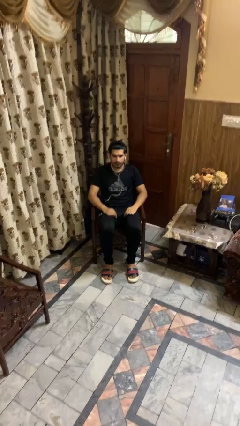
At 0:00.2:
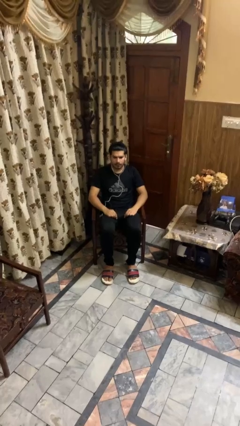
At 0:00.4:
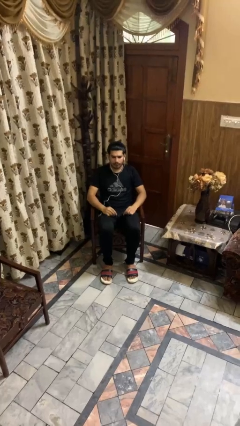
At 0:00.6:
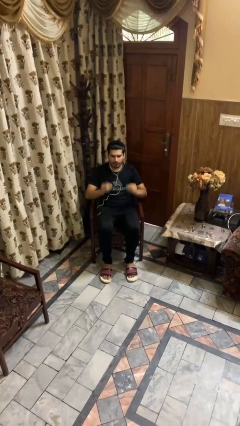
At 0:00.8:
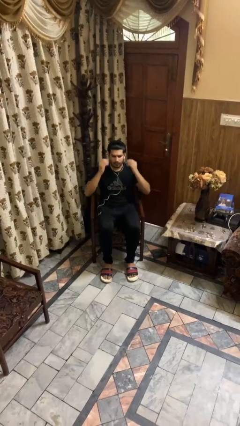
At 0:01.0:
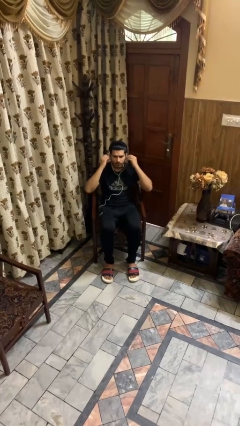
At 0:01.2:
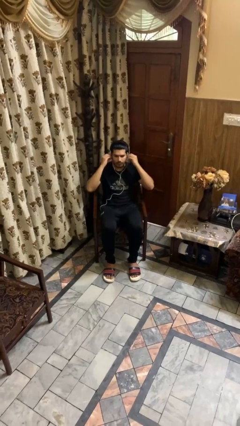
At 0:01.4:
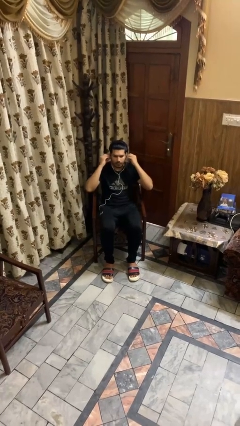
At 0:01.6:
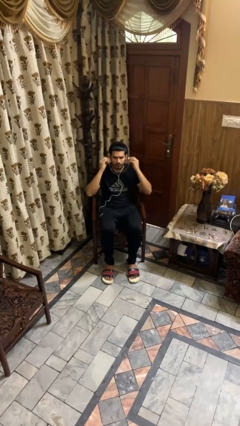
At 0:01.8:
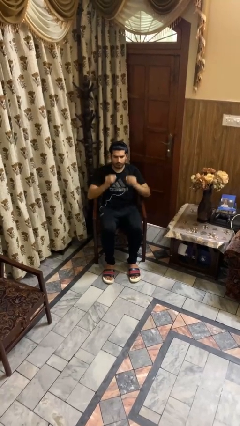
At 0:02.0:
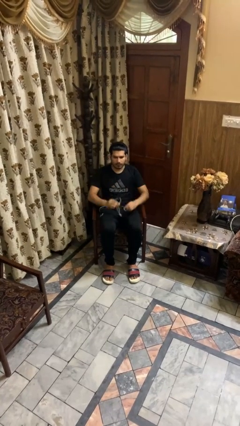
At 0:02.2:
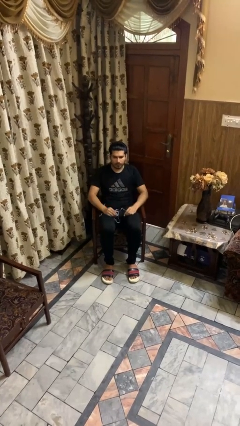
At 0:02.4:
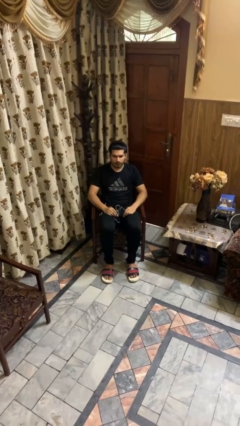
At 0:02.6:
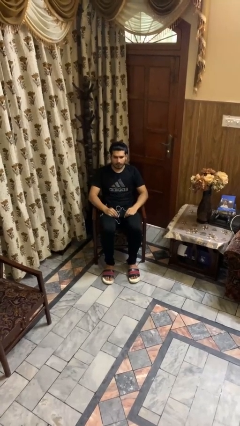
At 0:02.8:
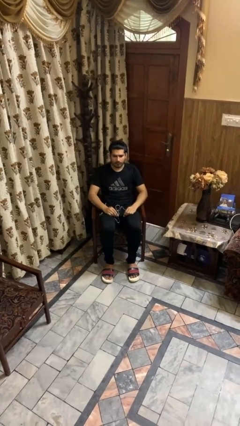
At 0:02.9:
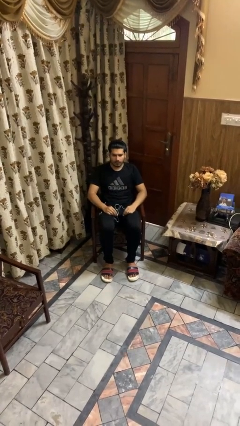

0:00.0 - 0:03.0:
person takes off headphones

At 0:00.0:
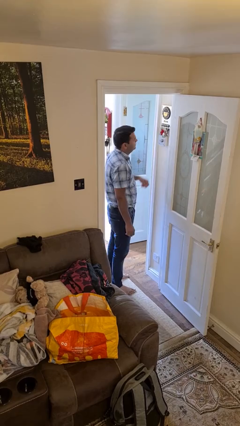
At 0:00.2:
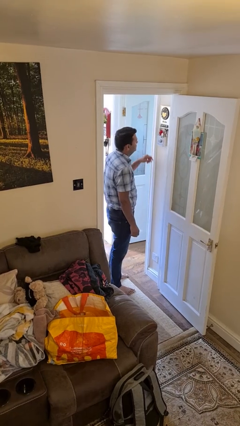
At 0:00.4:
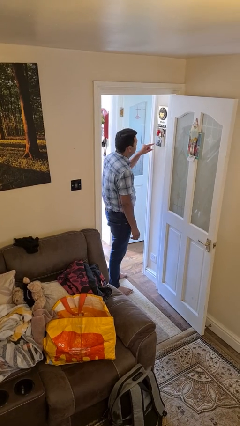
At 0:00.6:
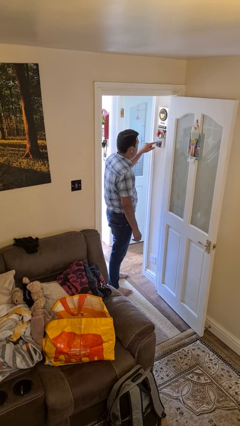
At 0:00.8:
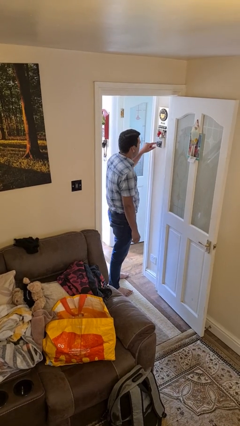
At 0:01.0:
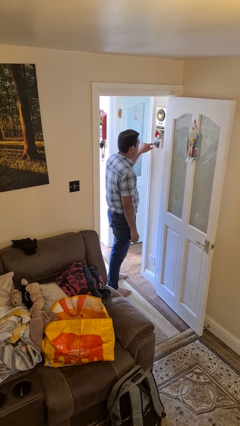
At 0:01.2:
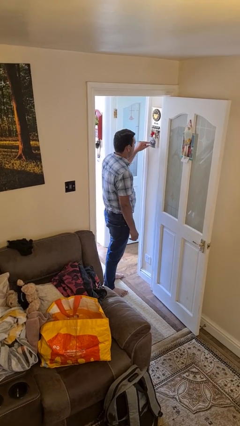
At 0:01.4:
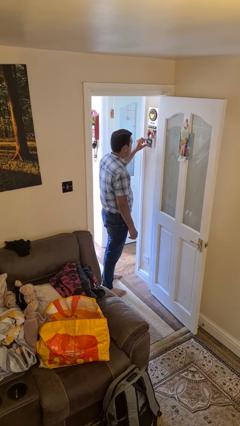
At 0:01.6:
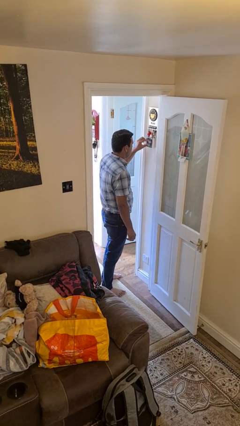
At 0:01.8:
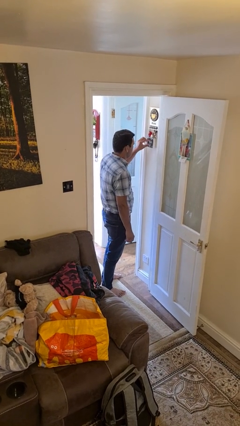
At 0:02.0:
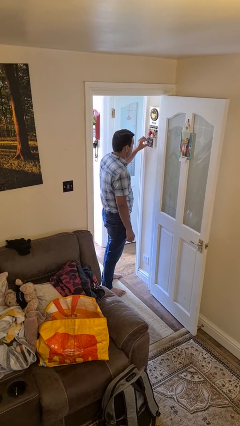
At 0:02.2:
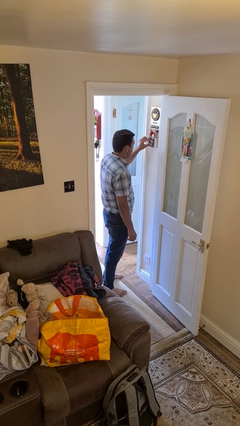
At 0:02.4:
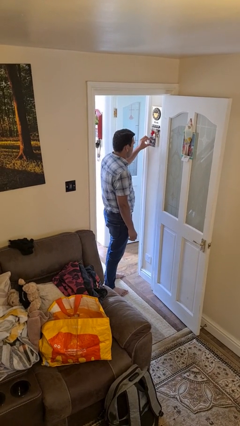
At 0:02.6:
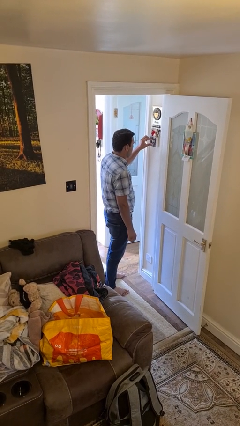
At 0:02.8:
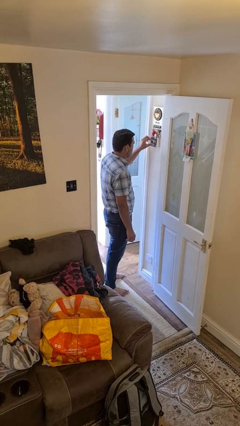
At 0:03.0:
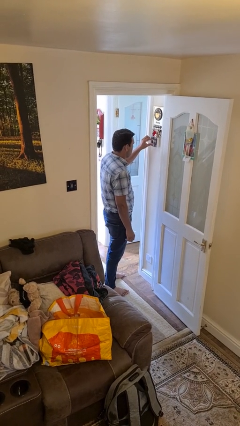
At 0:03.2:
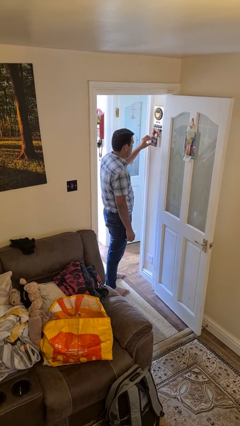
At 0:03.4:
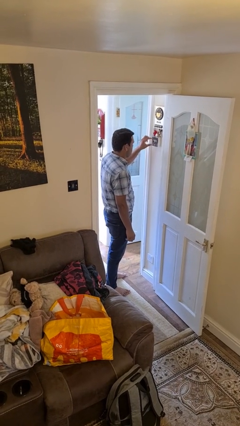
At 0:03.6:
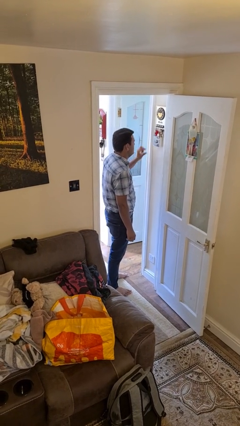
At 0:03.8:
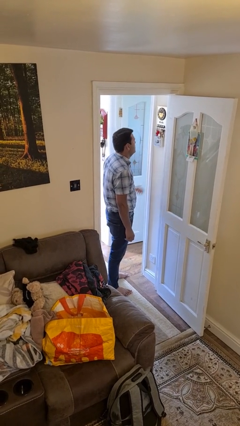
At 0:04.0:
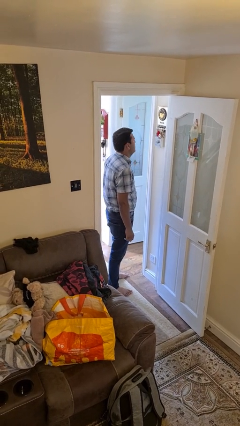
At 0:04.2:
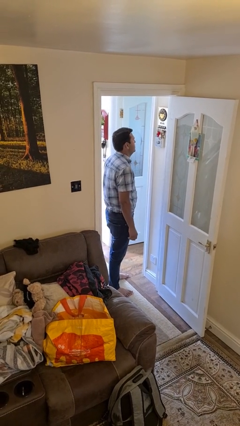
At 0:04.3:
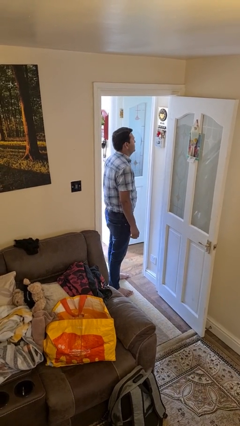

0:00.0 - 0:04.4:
person adjusts thermostat

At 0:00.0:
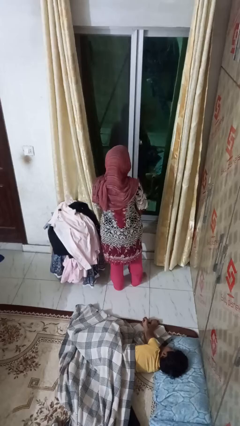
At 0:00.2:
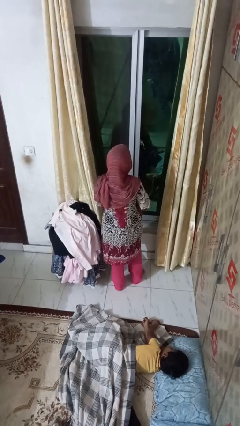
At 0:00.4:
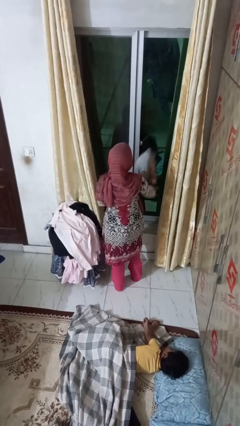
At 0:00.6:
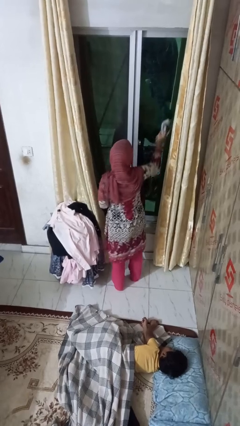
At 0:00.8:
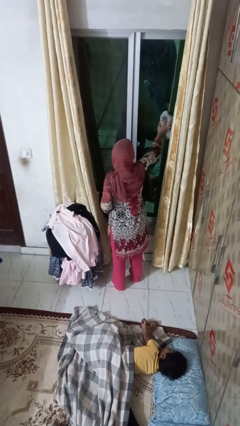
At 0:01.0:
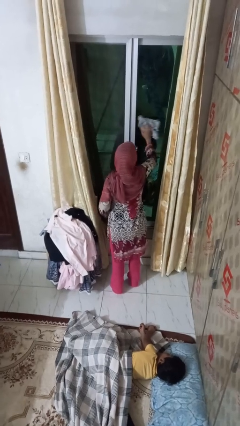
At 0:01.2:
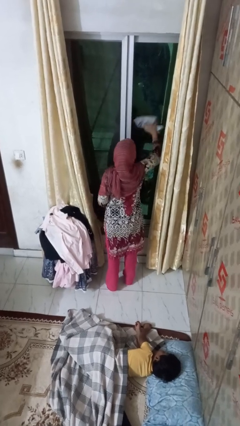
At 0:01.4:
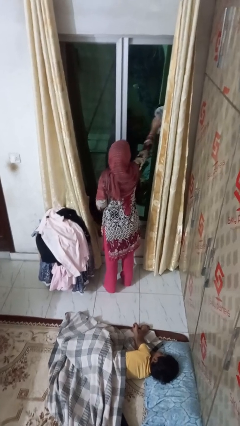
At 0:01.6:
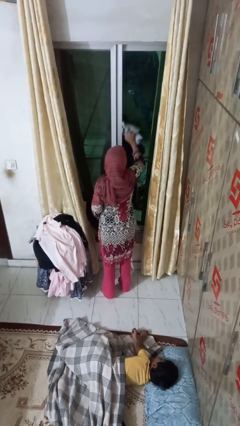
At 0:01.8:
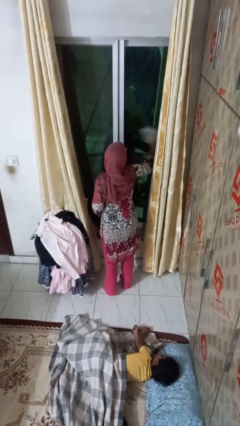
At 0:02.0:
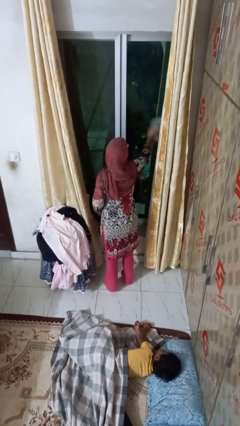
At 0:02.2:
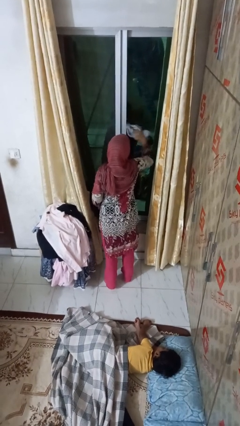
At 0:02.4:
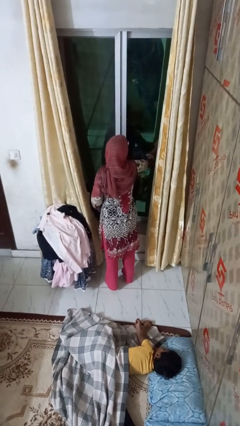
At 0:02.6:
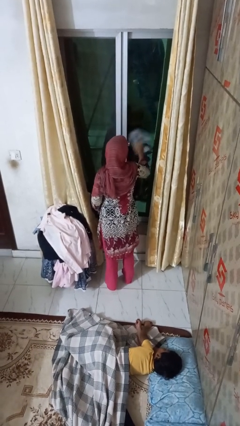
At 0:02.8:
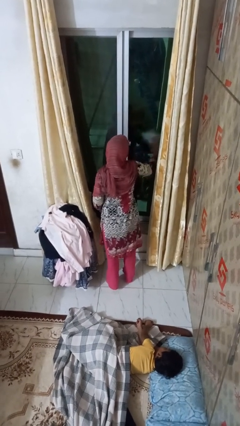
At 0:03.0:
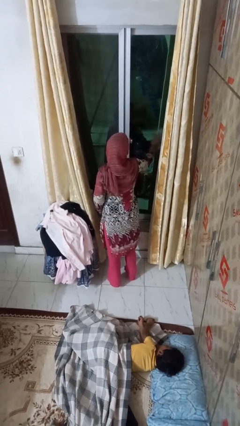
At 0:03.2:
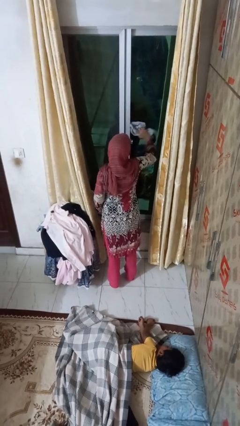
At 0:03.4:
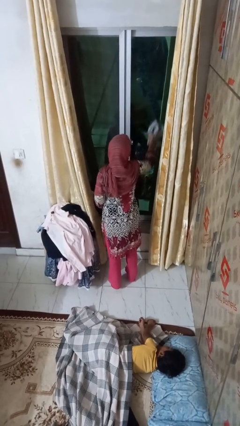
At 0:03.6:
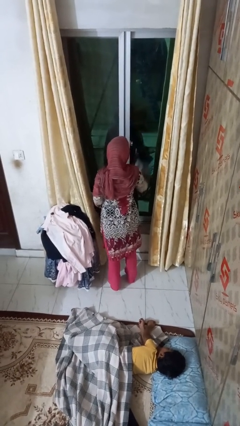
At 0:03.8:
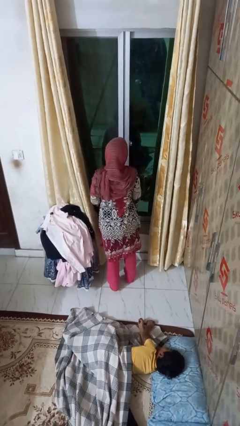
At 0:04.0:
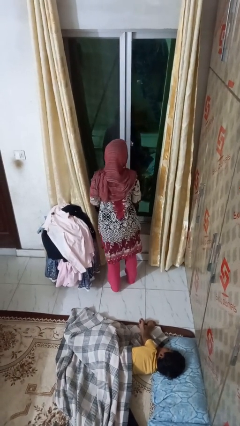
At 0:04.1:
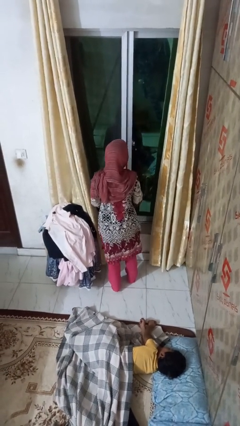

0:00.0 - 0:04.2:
person washes window

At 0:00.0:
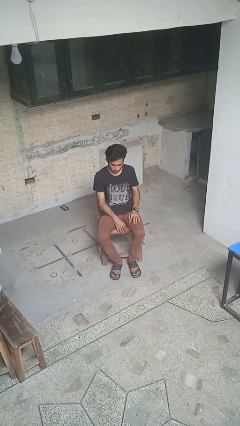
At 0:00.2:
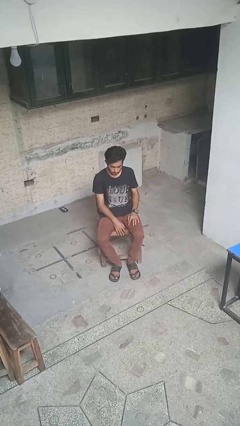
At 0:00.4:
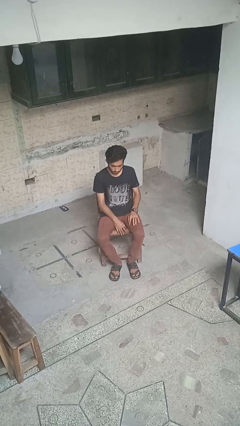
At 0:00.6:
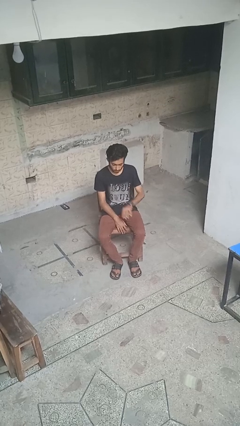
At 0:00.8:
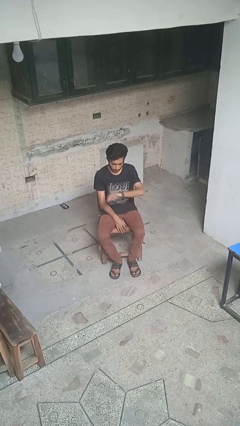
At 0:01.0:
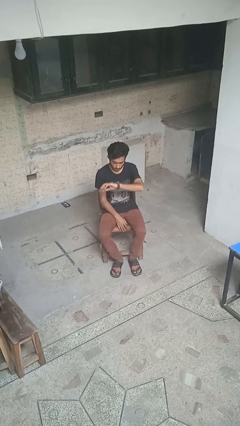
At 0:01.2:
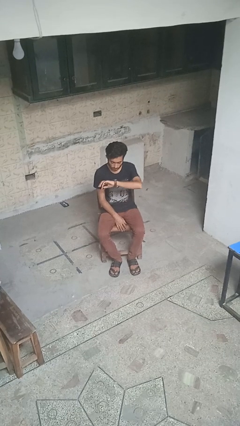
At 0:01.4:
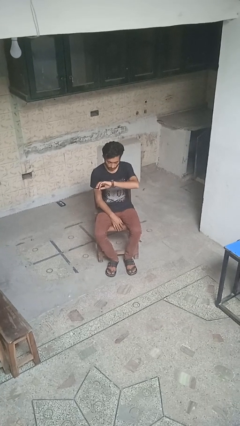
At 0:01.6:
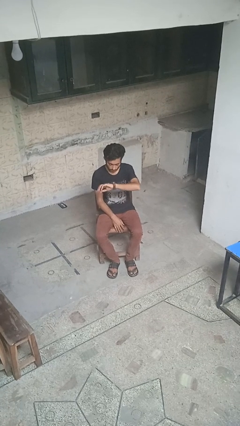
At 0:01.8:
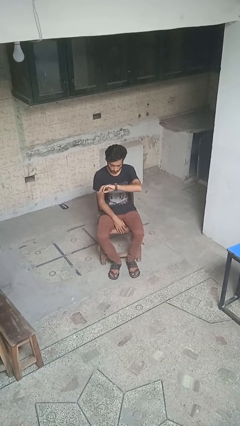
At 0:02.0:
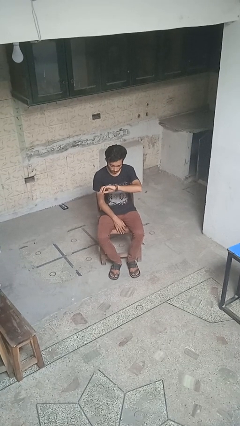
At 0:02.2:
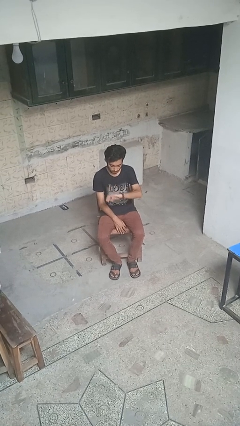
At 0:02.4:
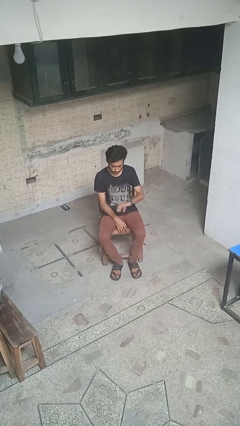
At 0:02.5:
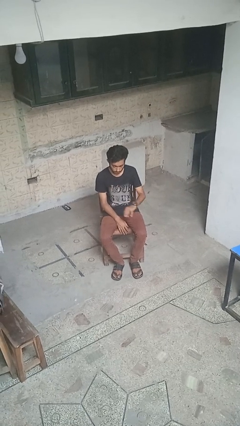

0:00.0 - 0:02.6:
person looks at wristwatch

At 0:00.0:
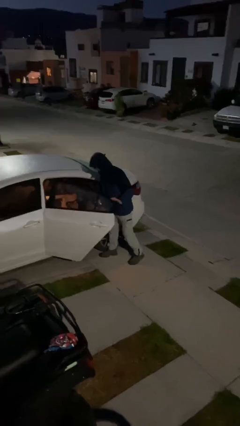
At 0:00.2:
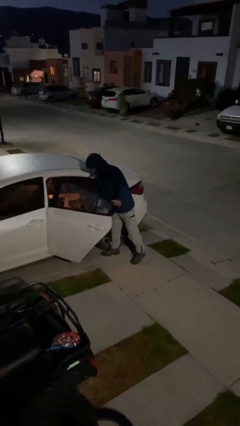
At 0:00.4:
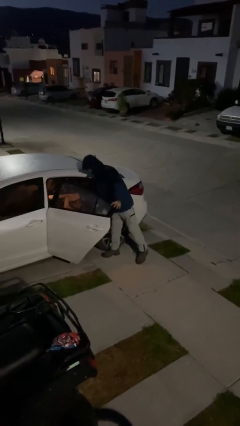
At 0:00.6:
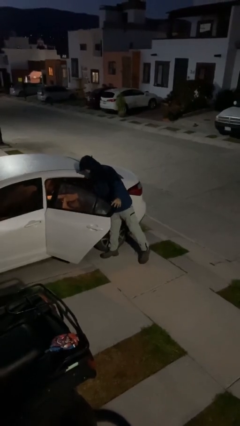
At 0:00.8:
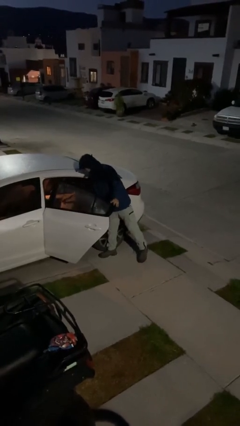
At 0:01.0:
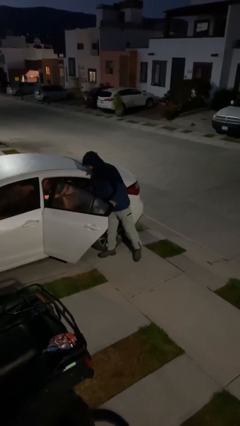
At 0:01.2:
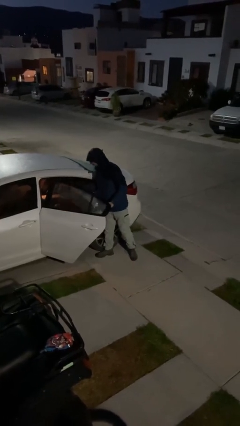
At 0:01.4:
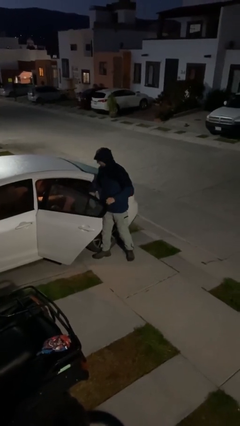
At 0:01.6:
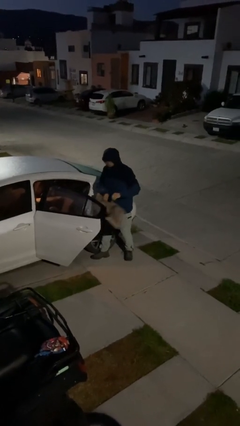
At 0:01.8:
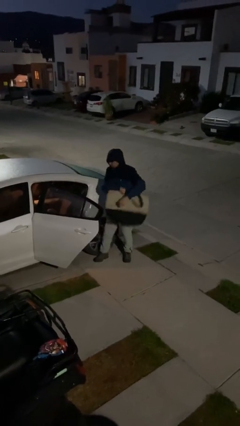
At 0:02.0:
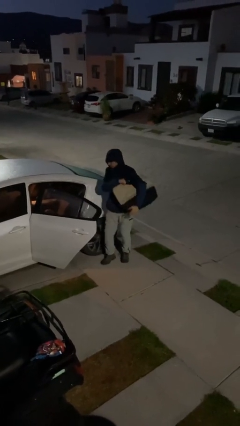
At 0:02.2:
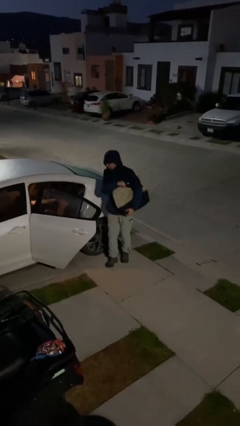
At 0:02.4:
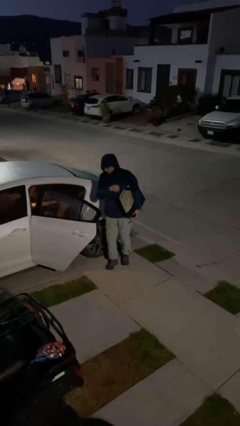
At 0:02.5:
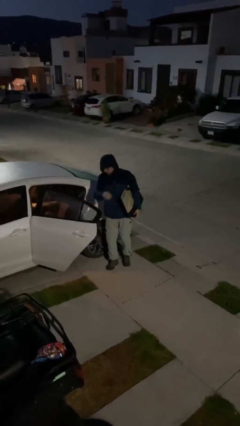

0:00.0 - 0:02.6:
person unloads car

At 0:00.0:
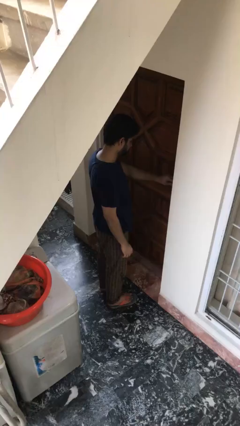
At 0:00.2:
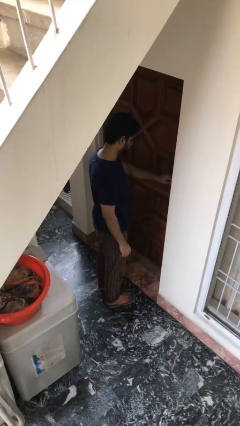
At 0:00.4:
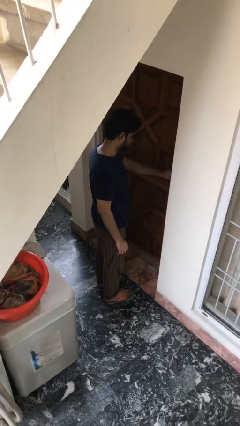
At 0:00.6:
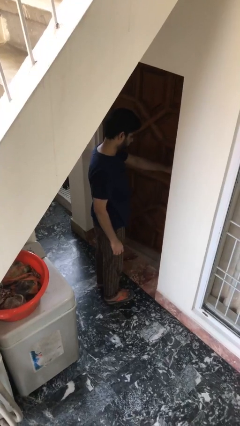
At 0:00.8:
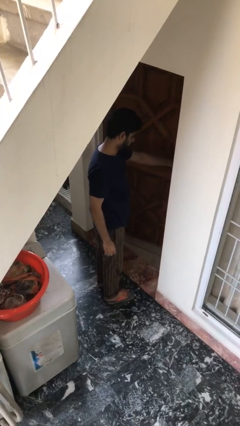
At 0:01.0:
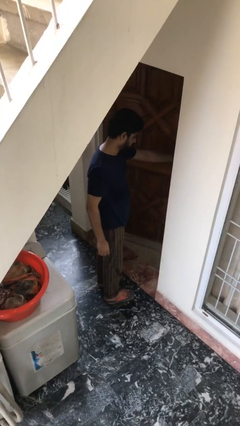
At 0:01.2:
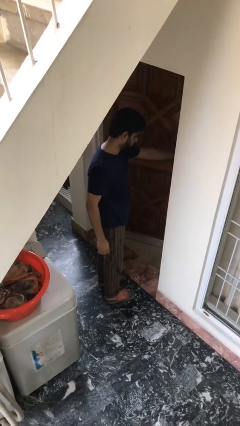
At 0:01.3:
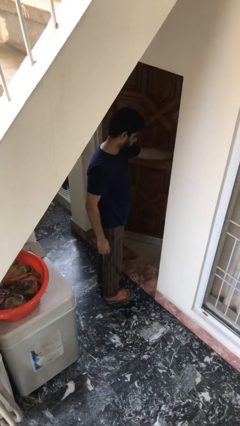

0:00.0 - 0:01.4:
person opens facility door
